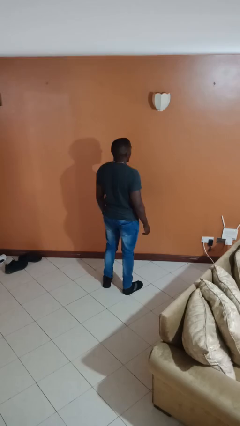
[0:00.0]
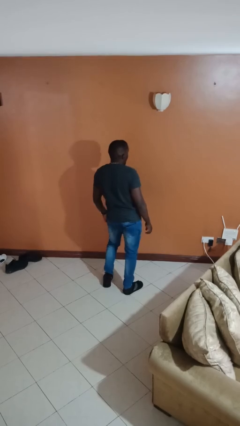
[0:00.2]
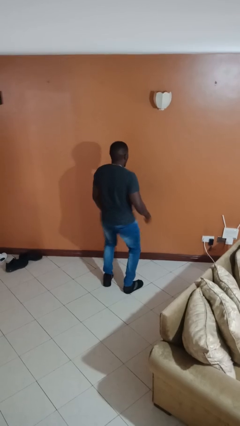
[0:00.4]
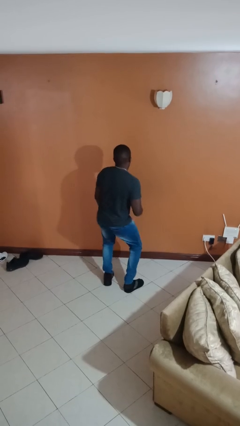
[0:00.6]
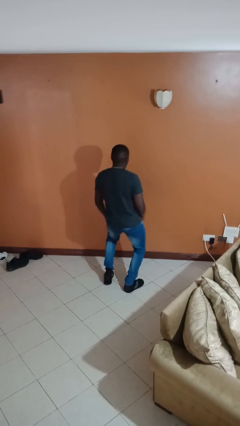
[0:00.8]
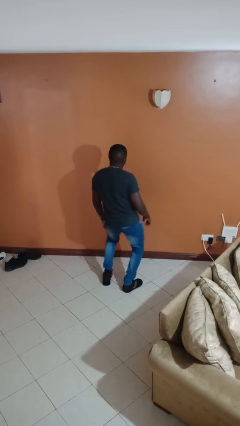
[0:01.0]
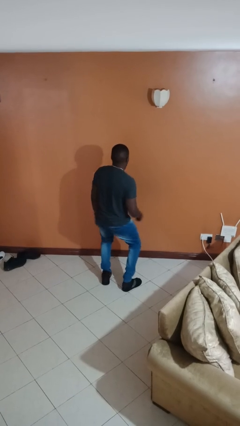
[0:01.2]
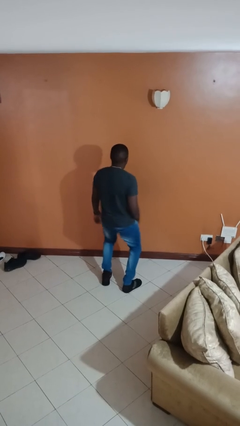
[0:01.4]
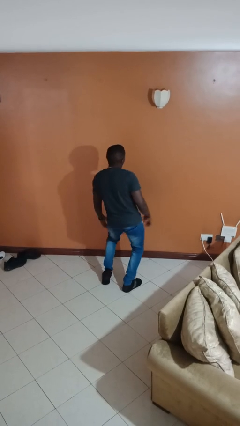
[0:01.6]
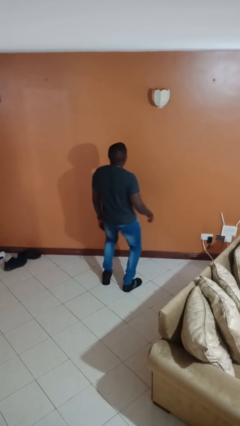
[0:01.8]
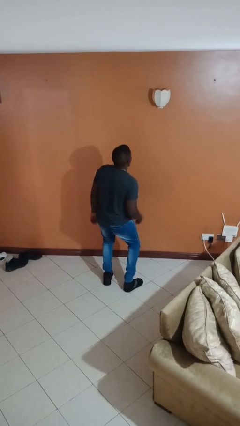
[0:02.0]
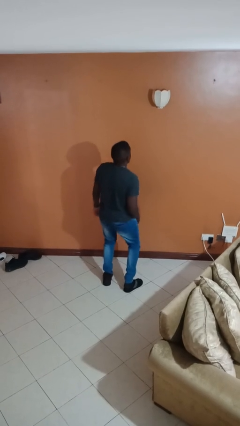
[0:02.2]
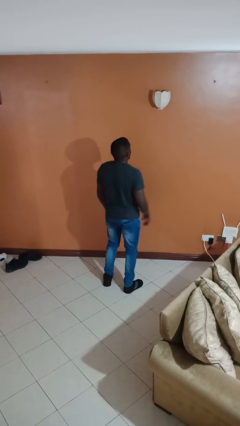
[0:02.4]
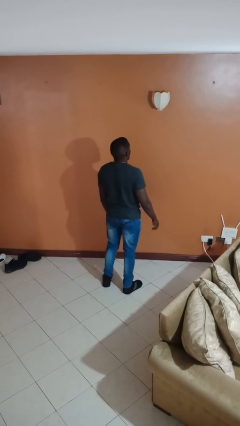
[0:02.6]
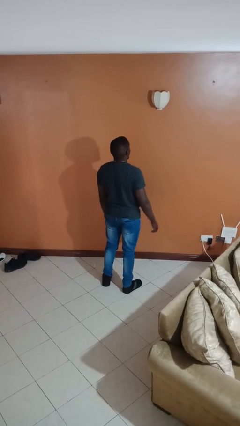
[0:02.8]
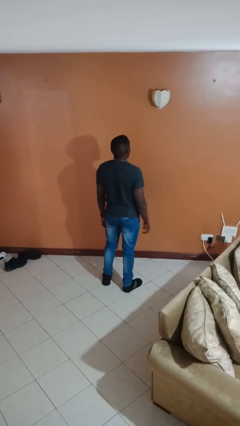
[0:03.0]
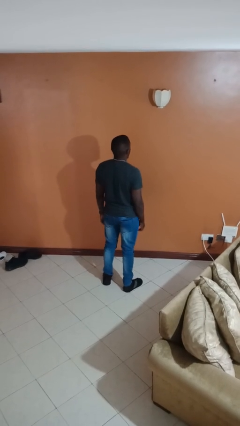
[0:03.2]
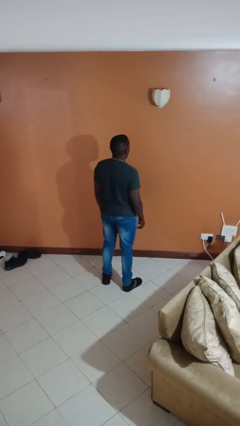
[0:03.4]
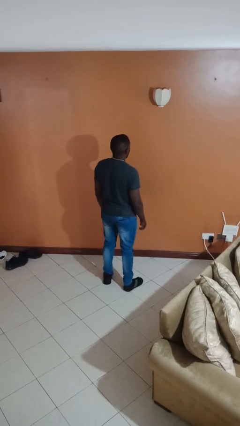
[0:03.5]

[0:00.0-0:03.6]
person wiggles hips

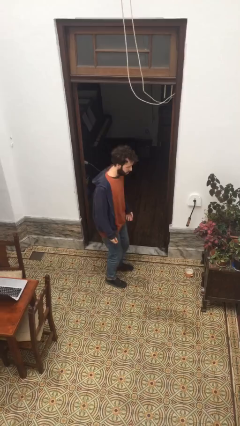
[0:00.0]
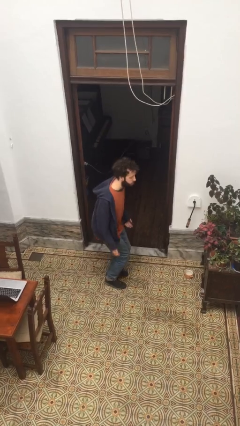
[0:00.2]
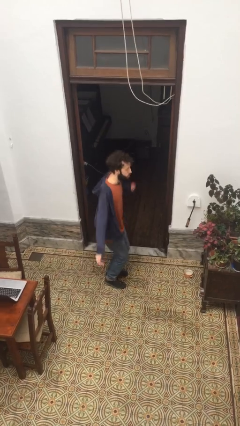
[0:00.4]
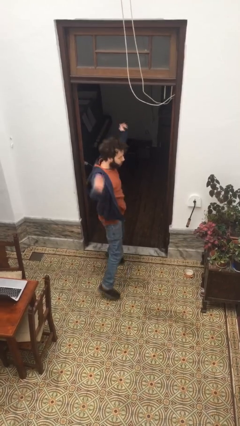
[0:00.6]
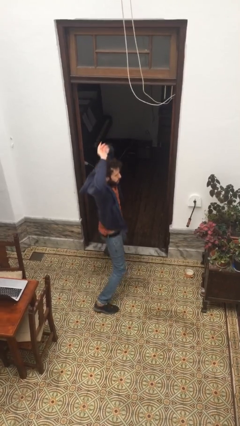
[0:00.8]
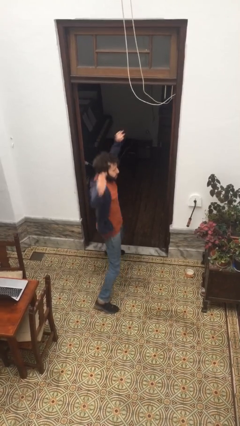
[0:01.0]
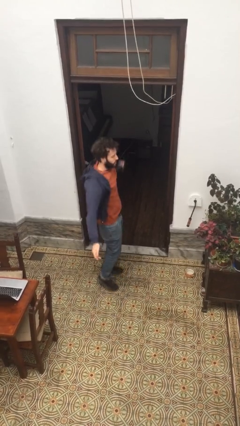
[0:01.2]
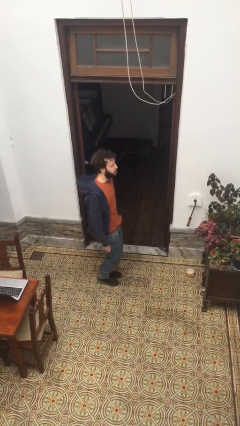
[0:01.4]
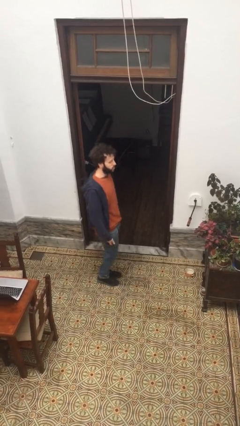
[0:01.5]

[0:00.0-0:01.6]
person exercises with jumping jacks

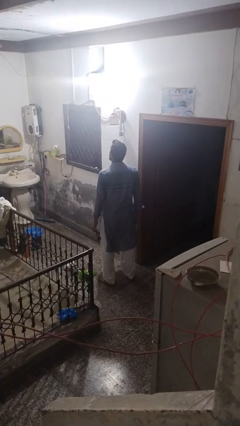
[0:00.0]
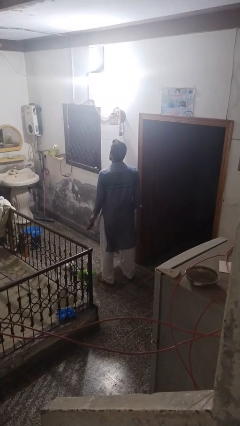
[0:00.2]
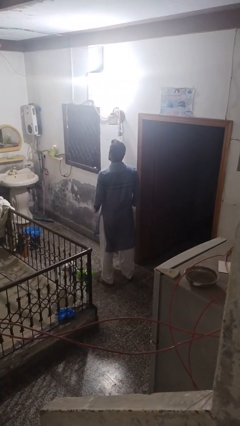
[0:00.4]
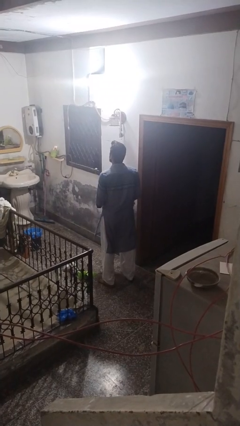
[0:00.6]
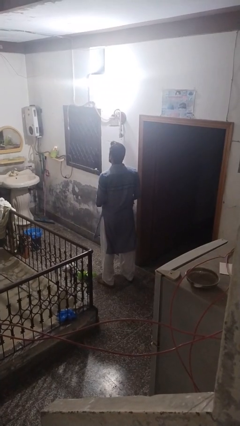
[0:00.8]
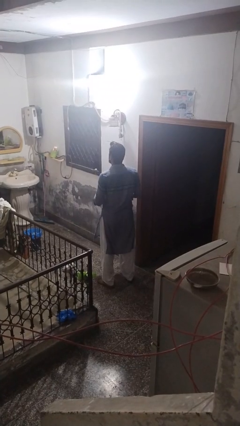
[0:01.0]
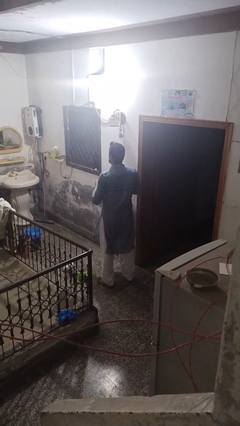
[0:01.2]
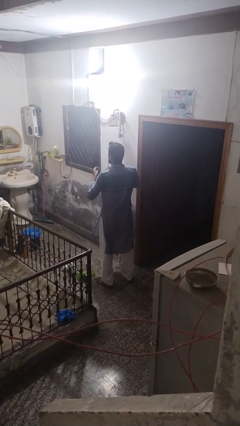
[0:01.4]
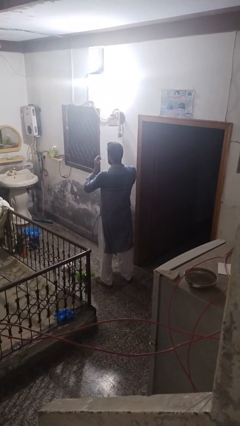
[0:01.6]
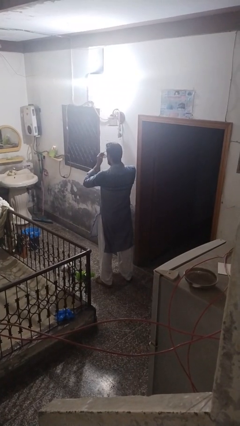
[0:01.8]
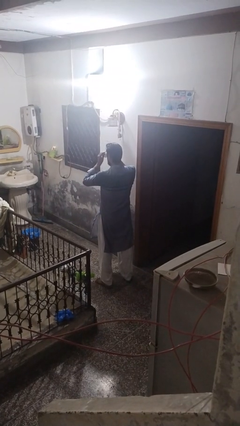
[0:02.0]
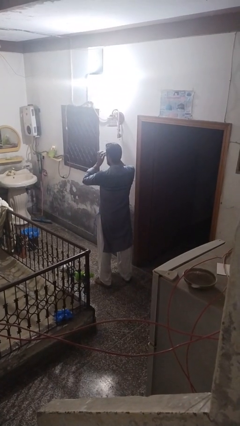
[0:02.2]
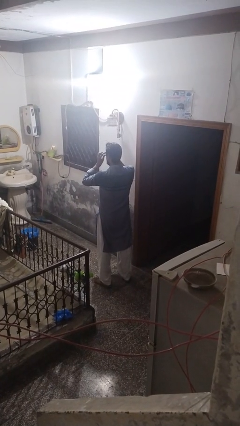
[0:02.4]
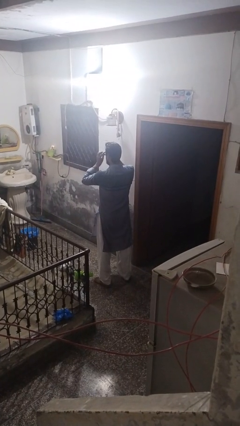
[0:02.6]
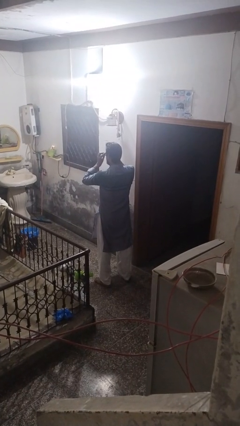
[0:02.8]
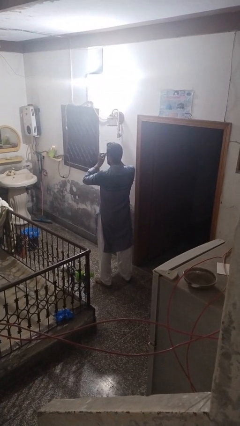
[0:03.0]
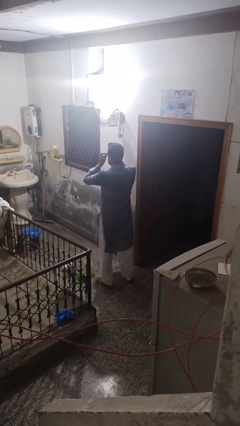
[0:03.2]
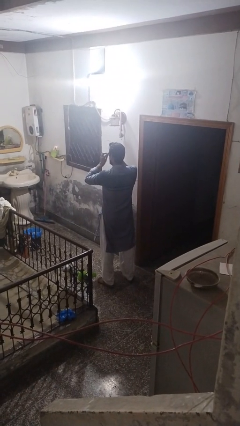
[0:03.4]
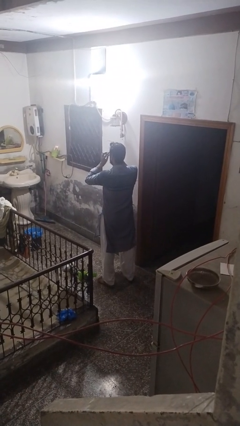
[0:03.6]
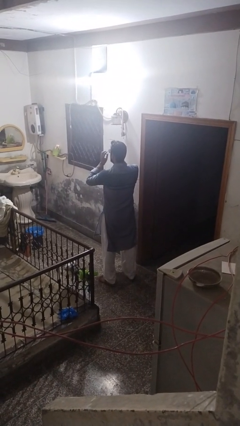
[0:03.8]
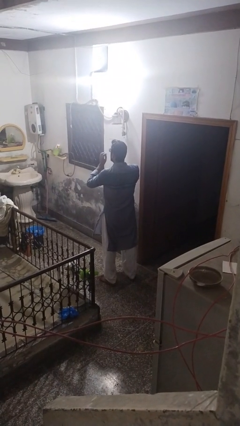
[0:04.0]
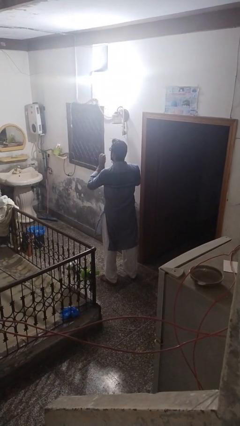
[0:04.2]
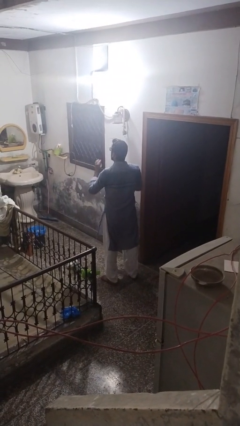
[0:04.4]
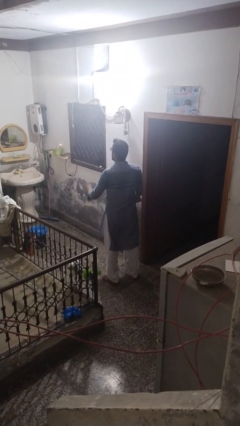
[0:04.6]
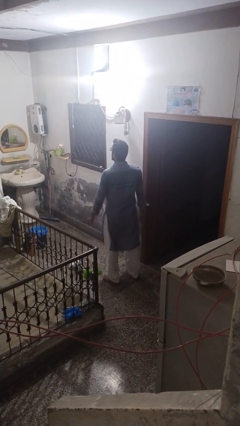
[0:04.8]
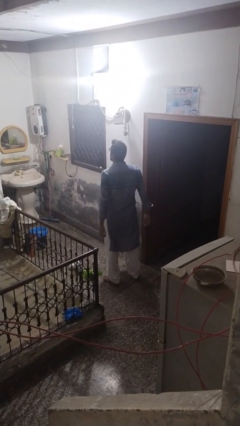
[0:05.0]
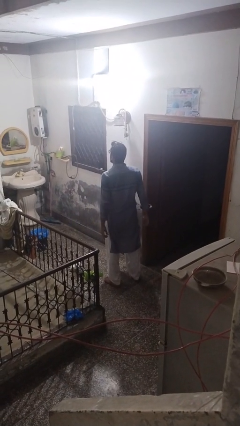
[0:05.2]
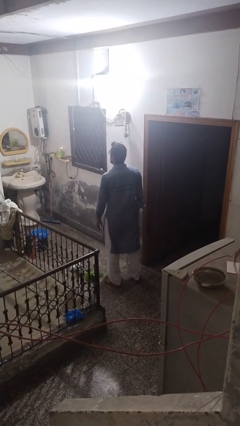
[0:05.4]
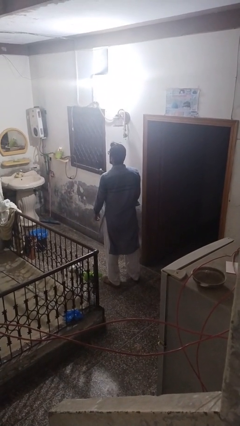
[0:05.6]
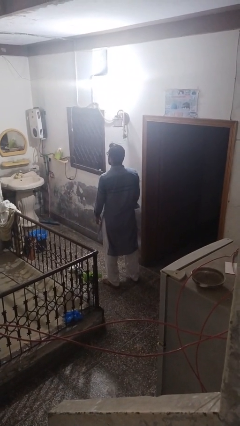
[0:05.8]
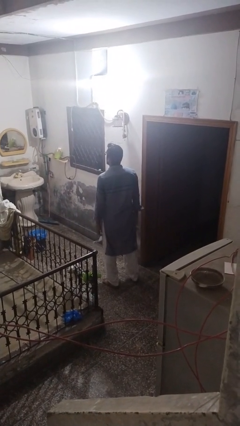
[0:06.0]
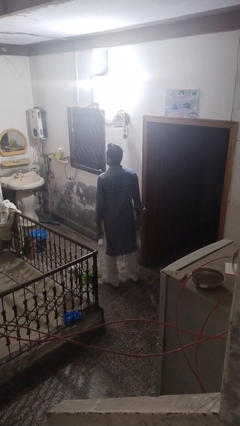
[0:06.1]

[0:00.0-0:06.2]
person puts on sunglasses

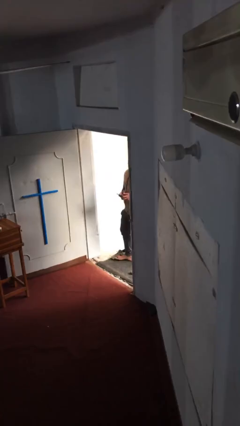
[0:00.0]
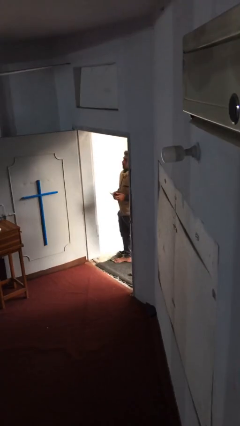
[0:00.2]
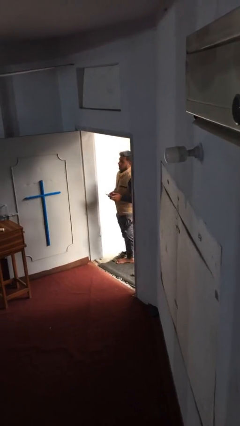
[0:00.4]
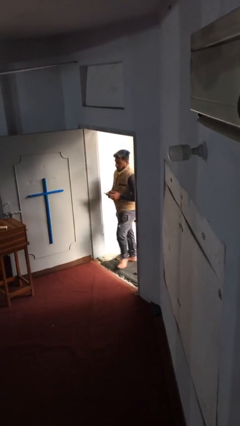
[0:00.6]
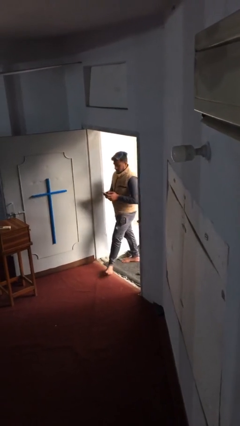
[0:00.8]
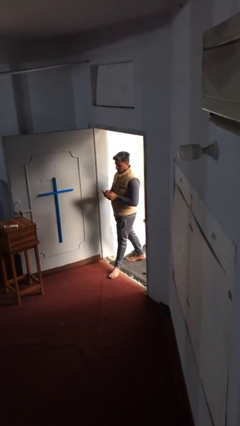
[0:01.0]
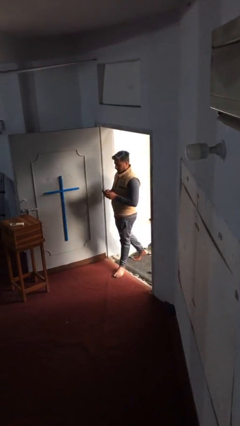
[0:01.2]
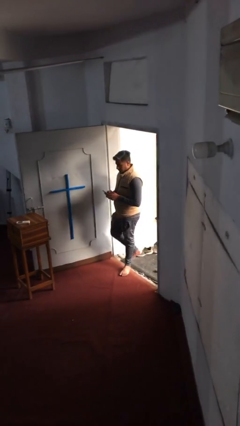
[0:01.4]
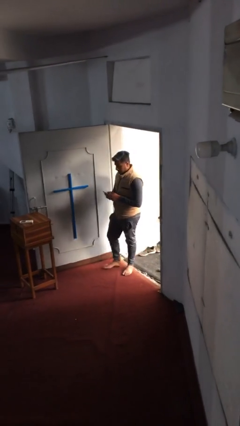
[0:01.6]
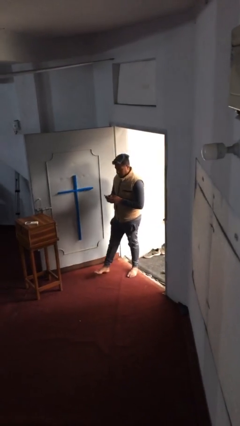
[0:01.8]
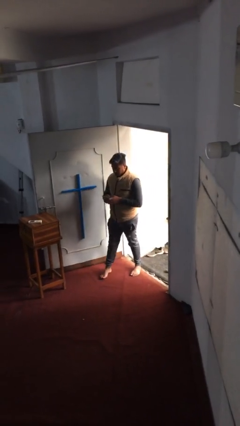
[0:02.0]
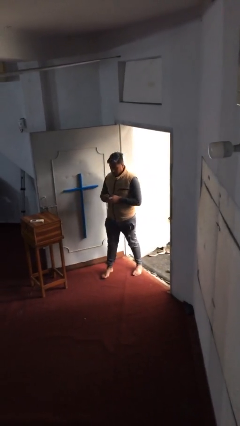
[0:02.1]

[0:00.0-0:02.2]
person enters scene through structure

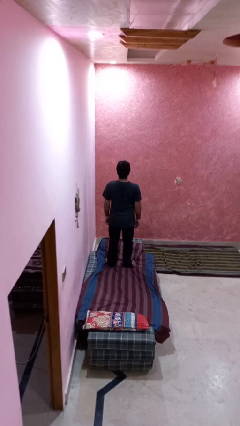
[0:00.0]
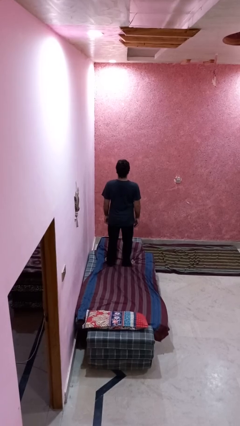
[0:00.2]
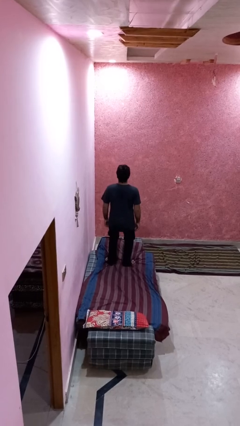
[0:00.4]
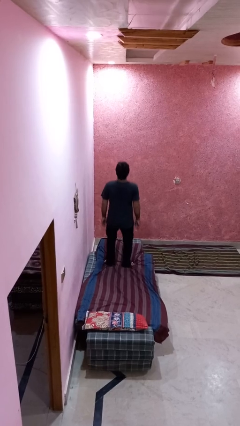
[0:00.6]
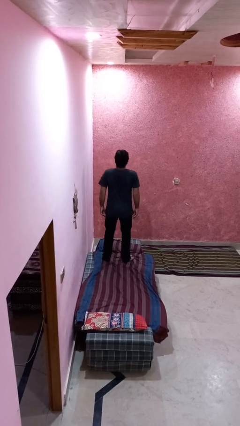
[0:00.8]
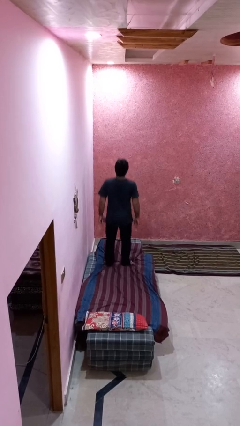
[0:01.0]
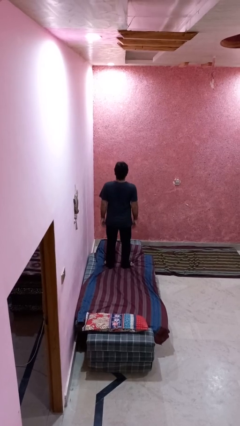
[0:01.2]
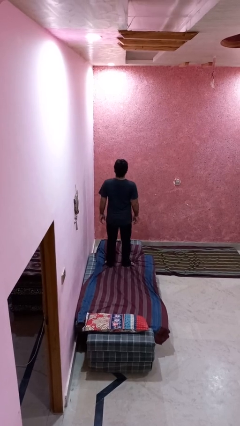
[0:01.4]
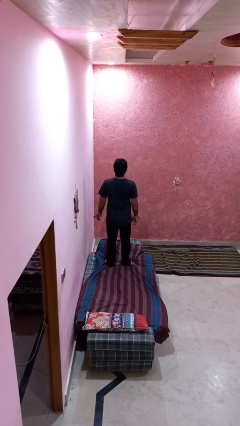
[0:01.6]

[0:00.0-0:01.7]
person jumps on bed

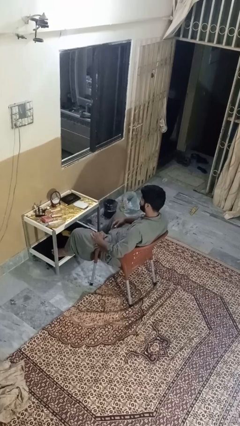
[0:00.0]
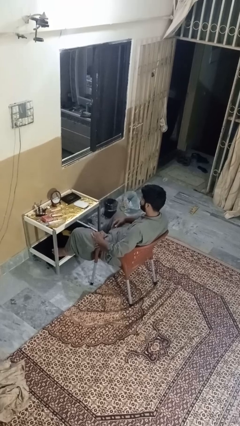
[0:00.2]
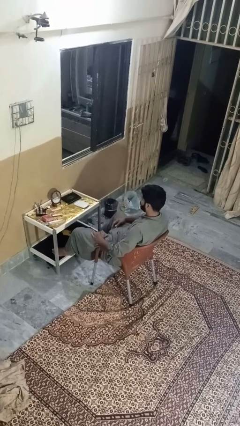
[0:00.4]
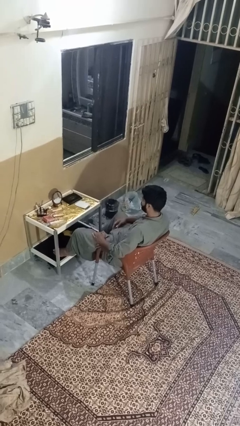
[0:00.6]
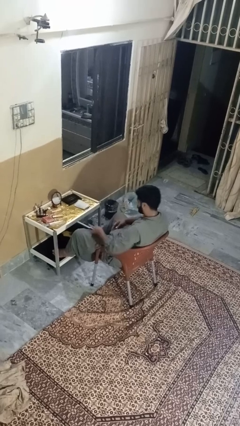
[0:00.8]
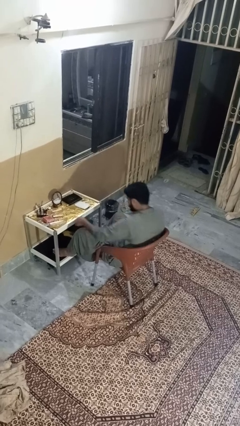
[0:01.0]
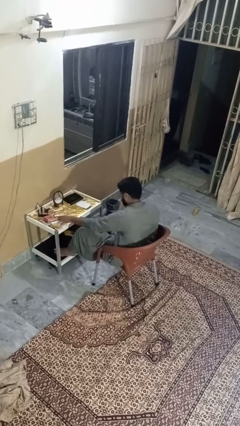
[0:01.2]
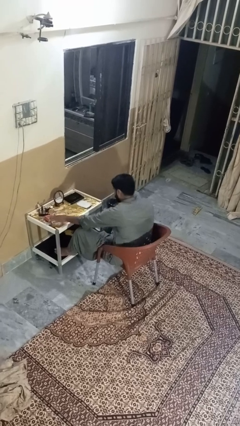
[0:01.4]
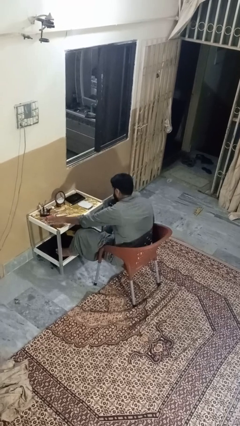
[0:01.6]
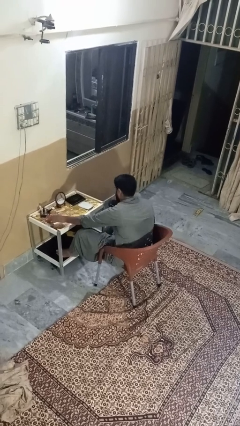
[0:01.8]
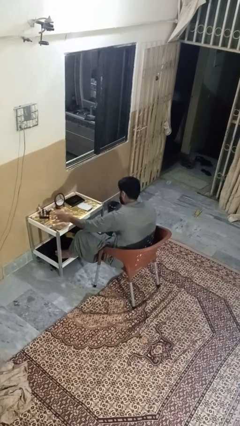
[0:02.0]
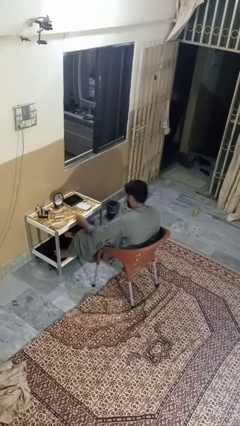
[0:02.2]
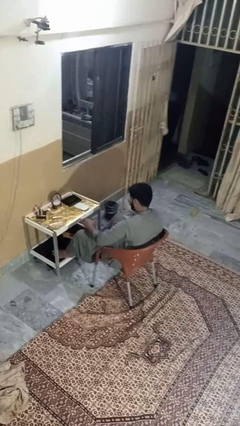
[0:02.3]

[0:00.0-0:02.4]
person picks up object from table
